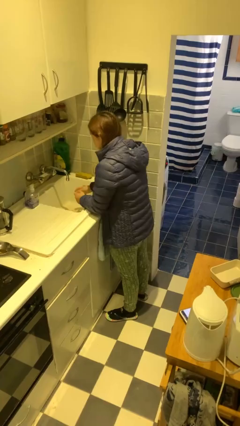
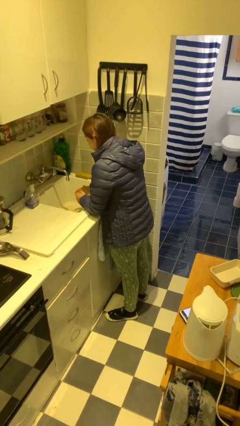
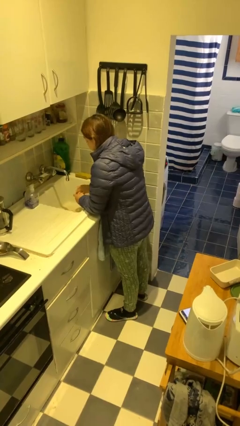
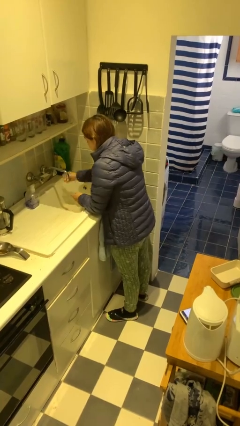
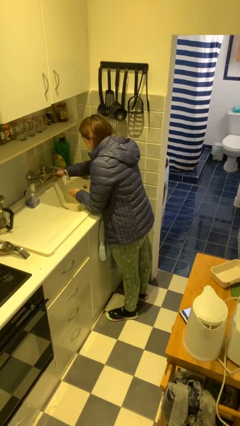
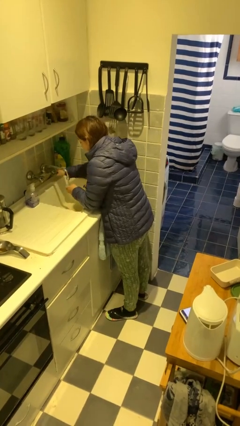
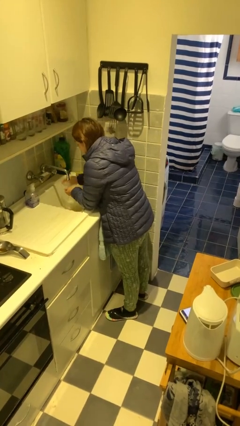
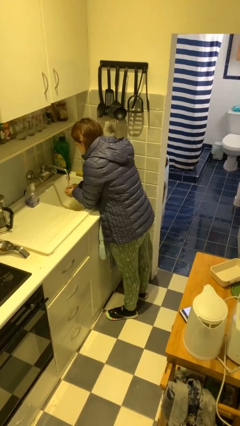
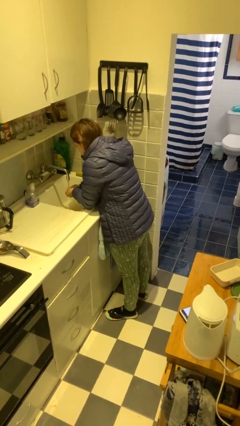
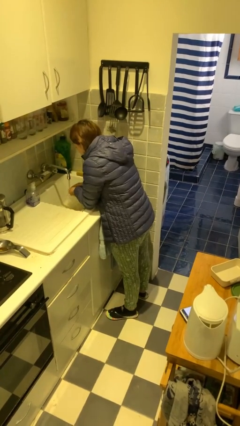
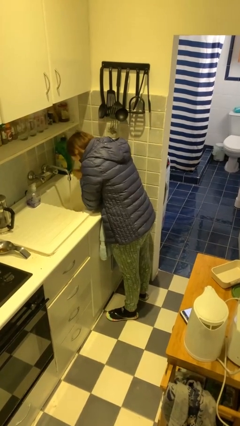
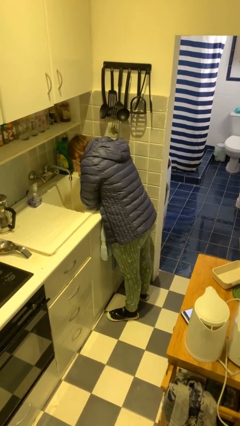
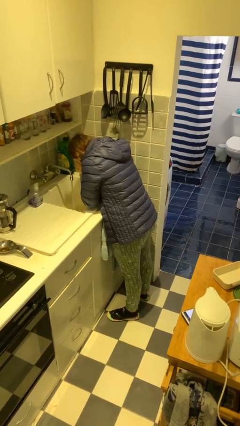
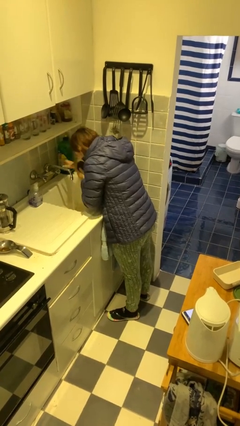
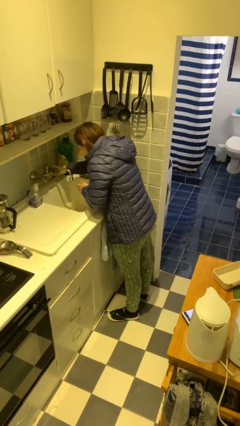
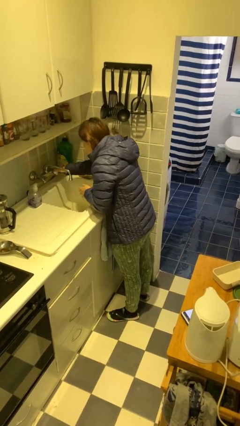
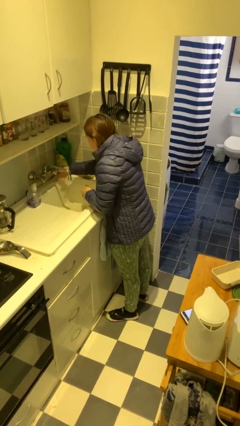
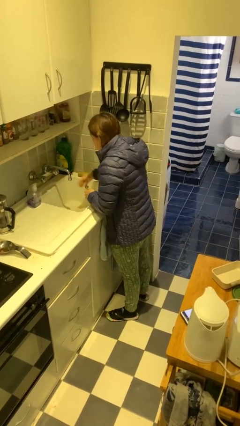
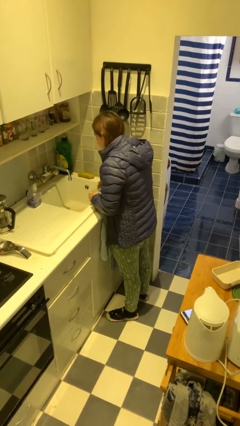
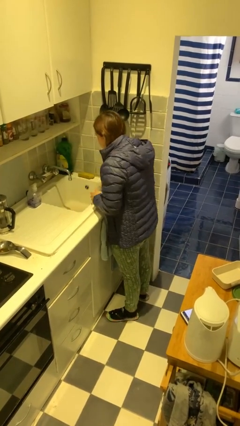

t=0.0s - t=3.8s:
person washes face

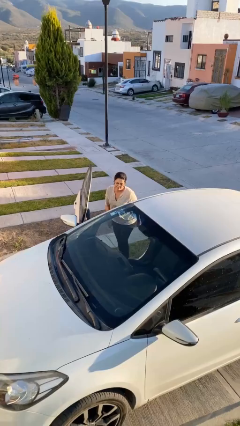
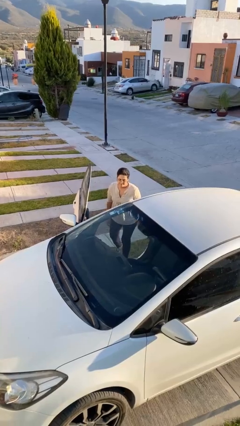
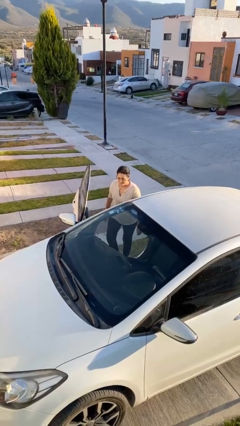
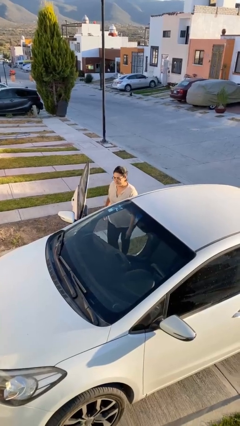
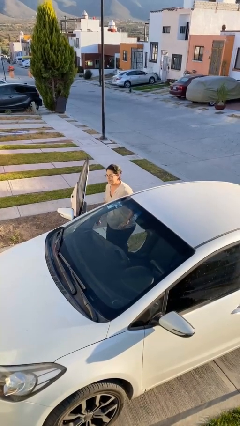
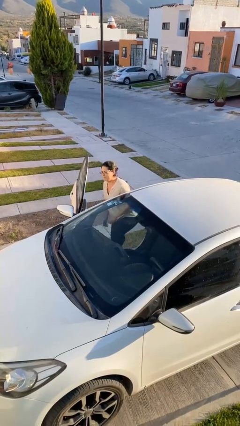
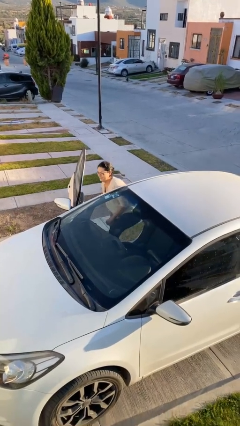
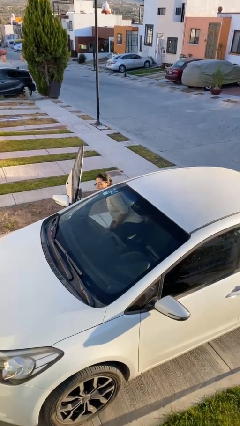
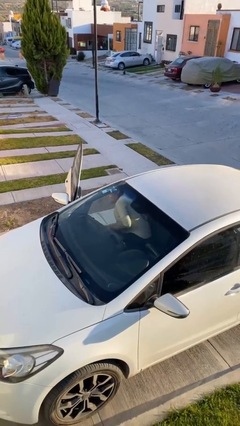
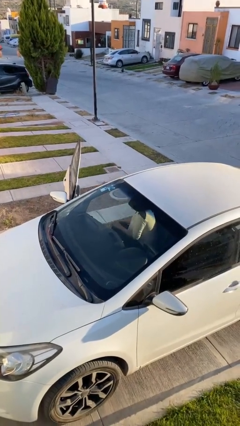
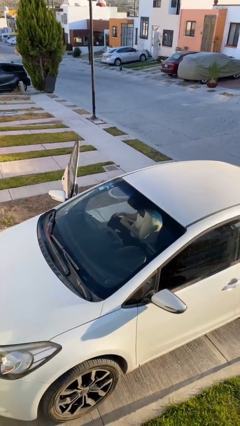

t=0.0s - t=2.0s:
person enters car

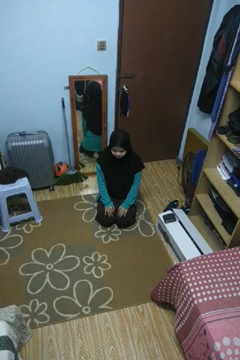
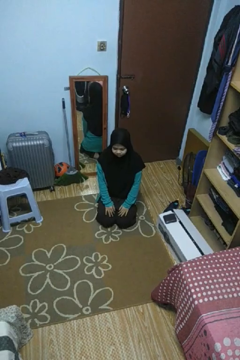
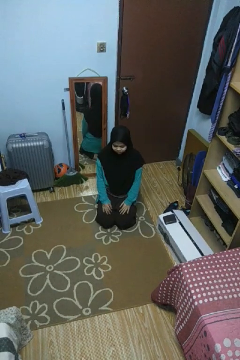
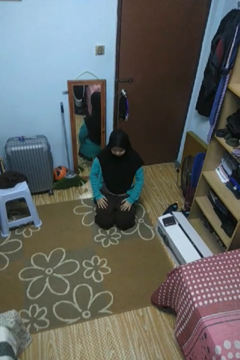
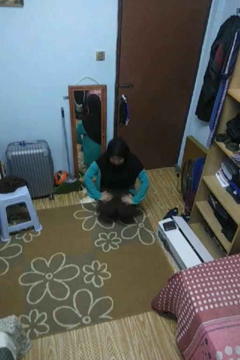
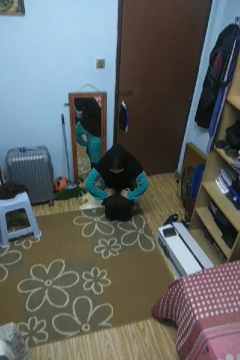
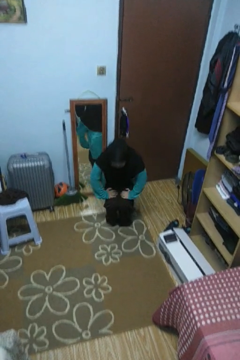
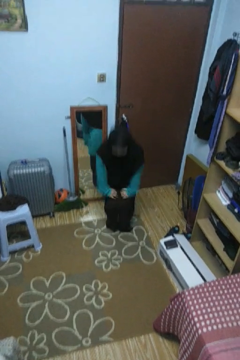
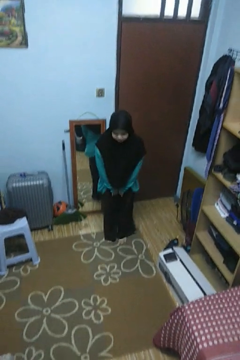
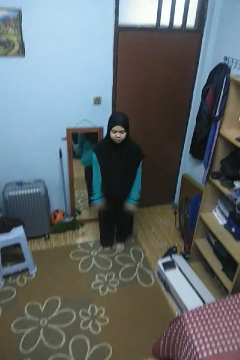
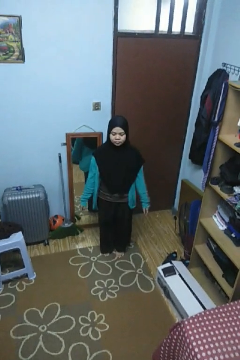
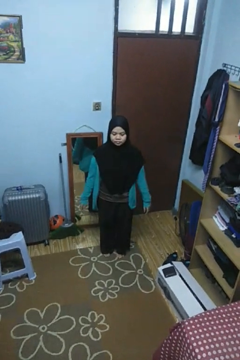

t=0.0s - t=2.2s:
person stands up from floor

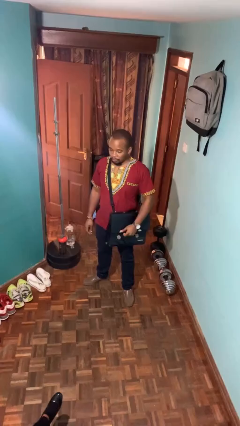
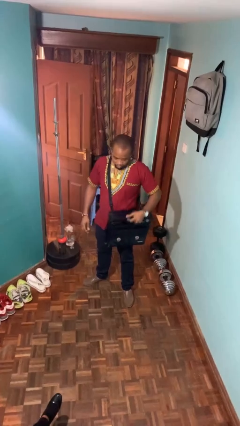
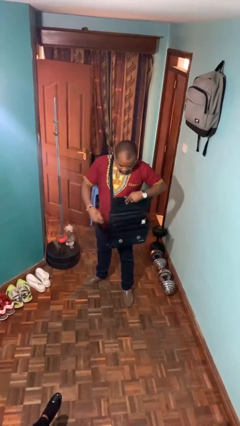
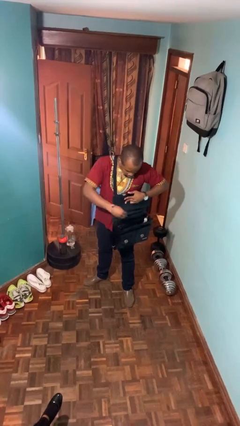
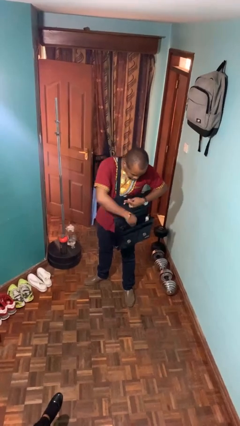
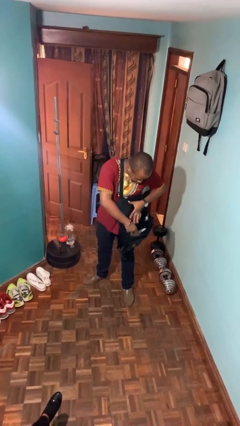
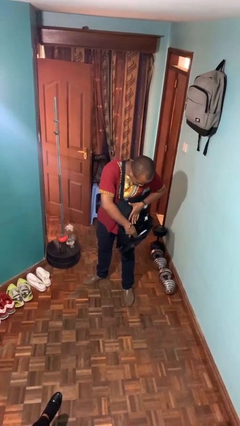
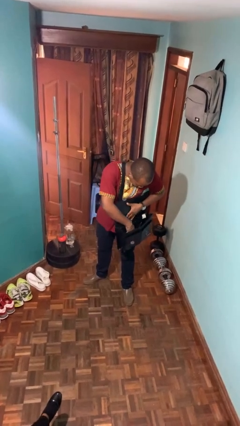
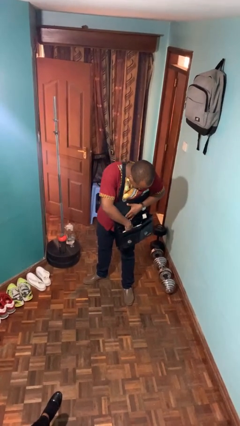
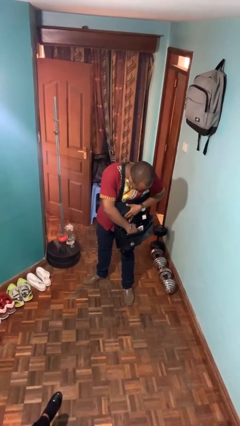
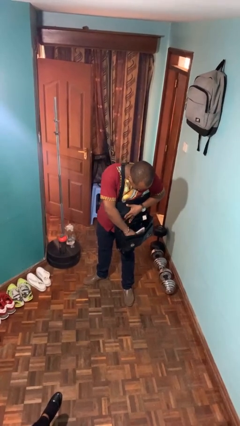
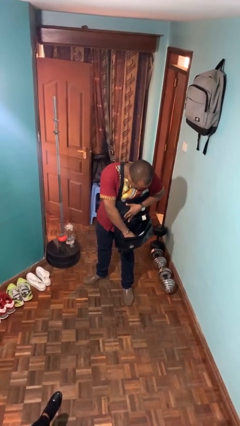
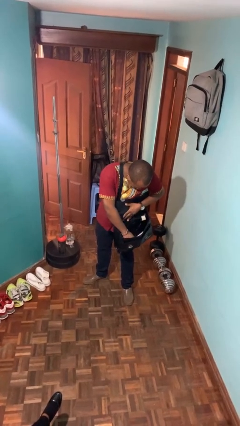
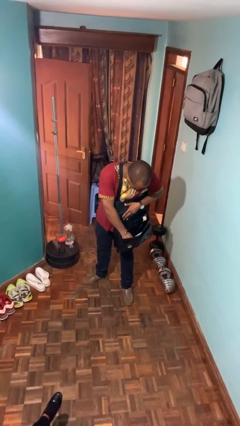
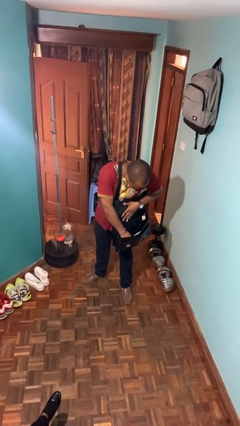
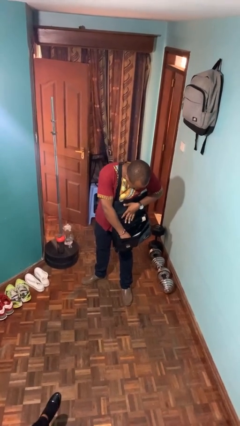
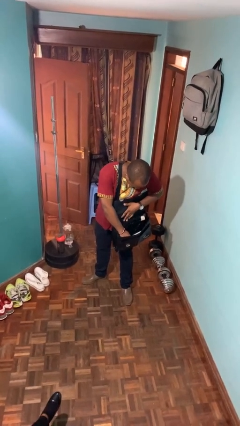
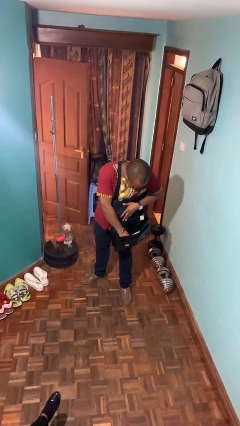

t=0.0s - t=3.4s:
person searches in purse

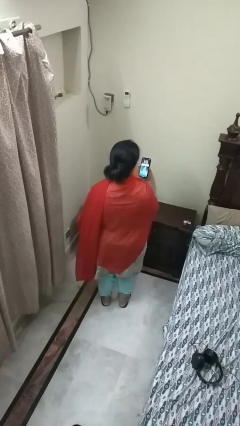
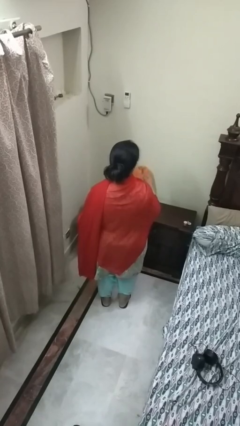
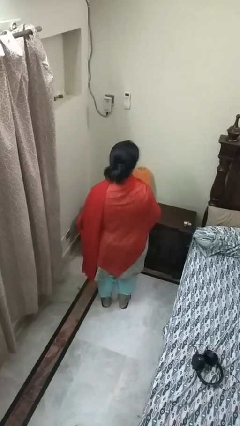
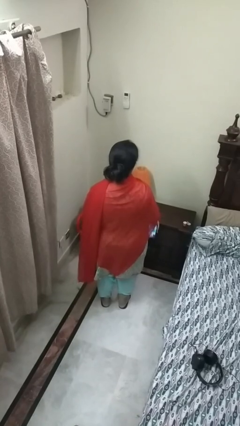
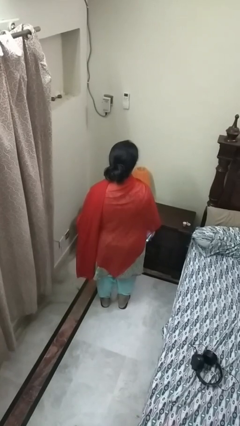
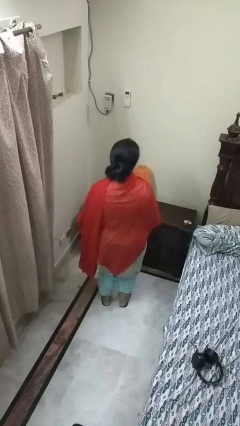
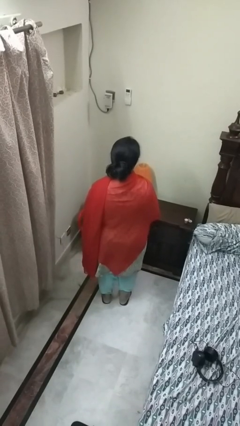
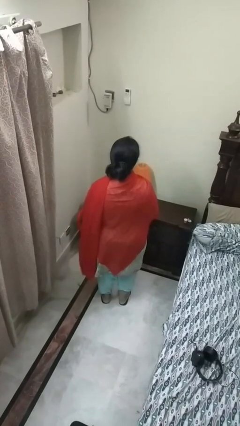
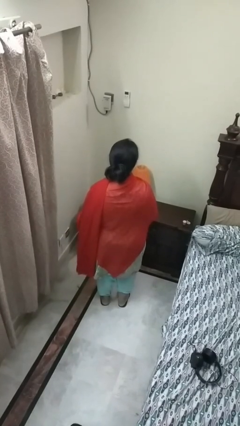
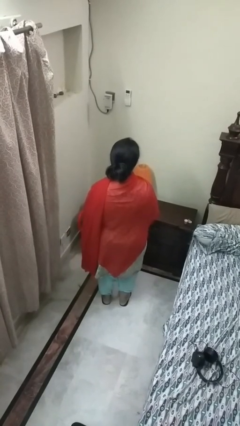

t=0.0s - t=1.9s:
person puts phone into pocket

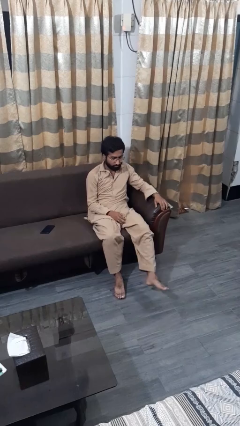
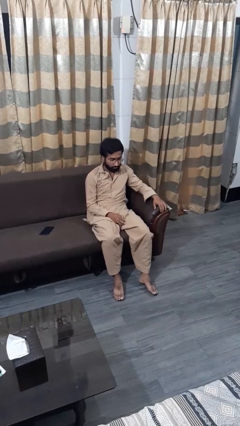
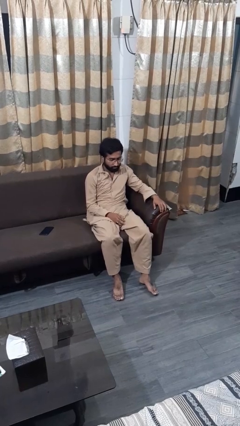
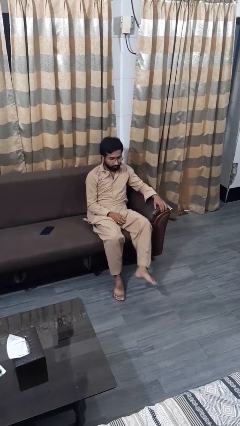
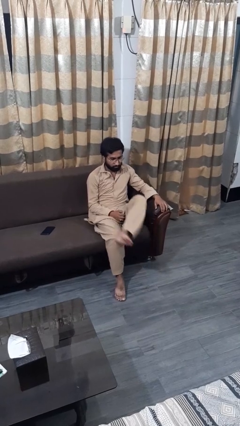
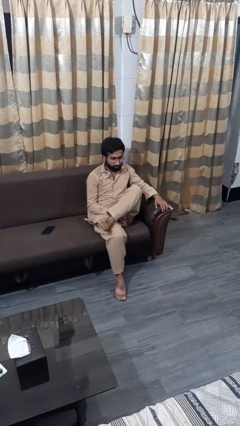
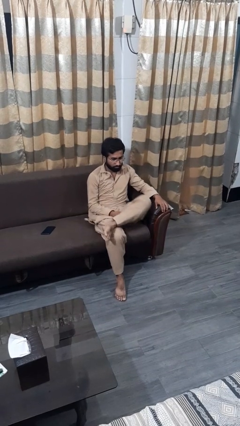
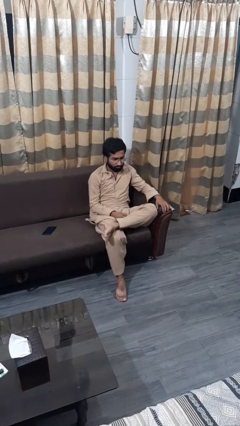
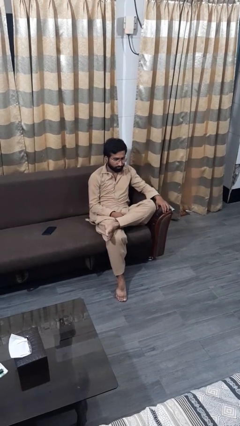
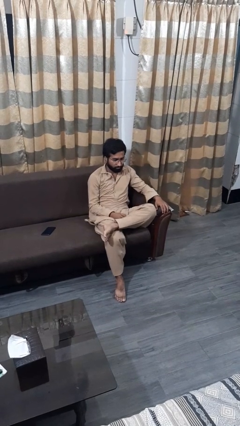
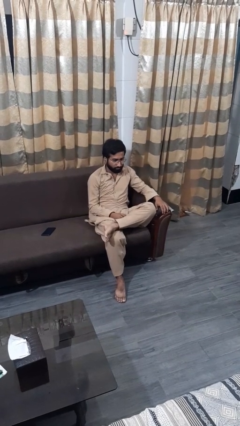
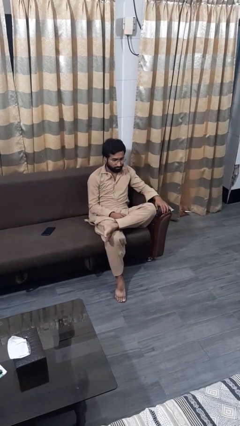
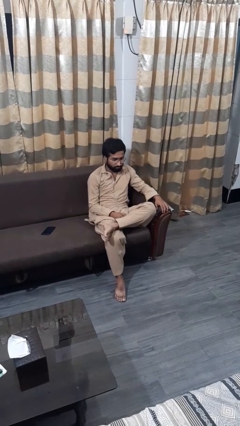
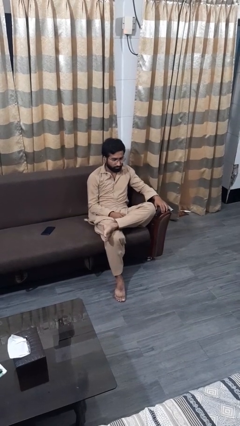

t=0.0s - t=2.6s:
person crosses legs

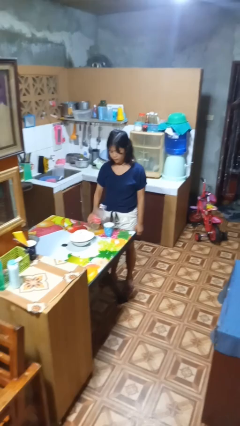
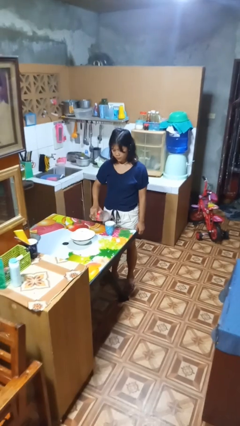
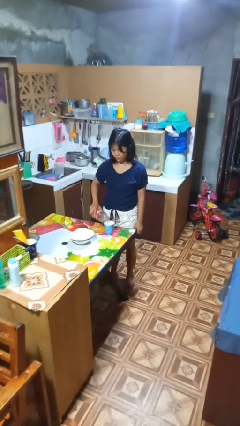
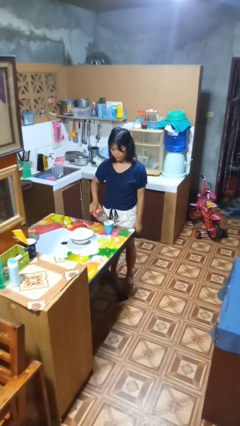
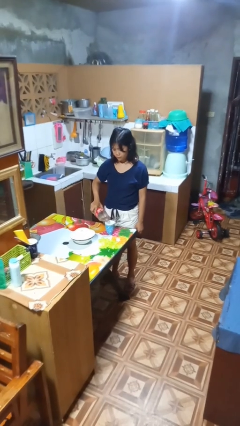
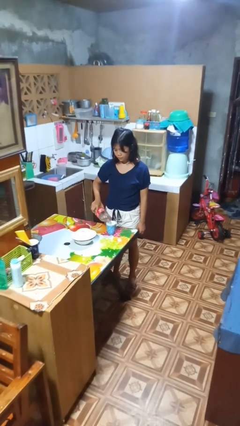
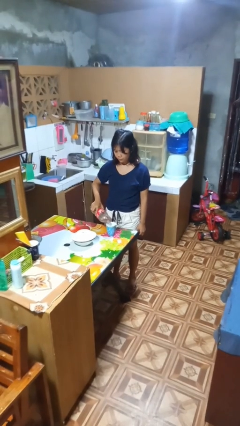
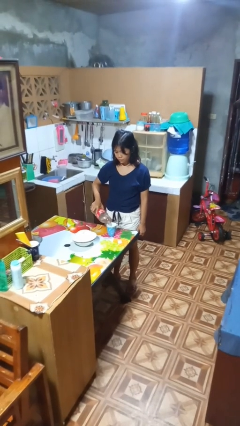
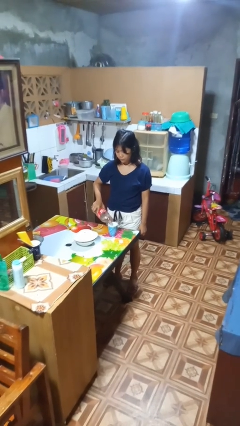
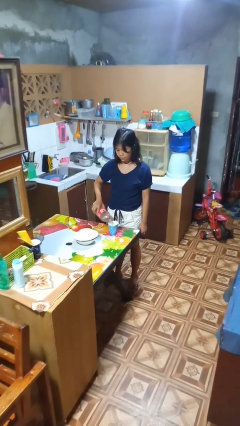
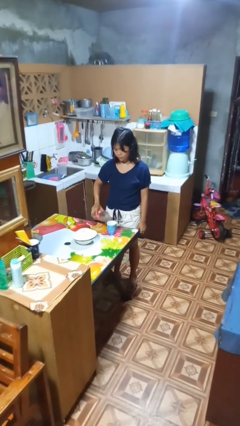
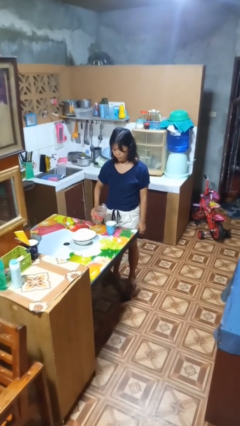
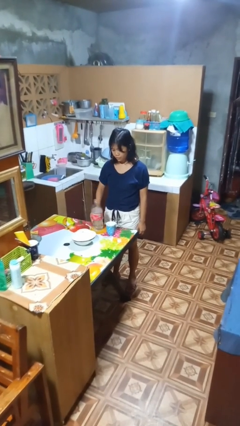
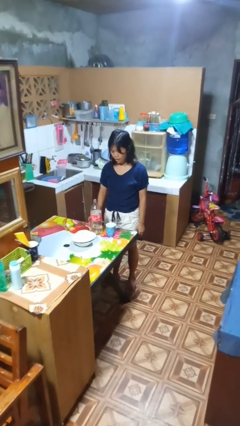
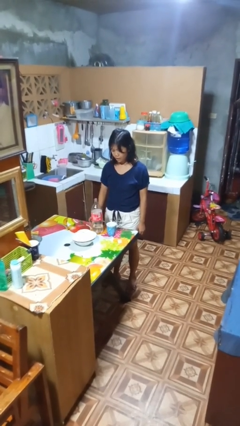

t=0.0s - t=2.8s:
person pours liquid into cup
